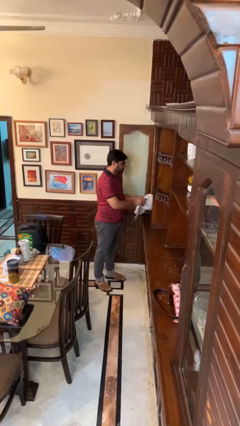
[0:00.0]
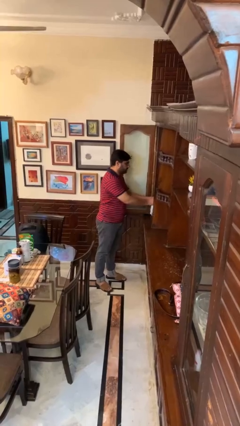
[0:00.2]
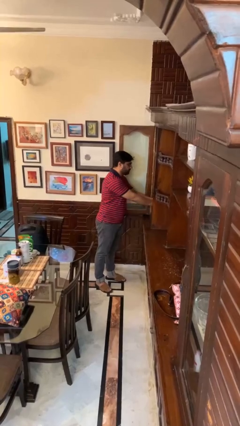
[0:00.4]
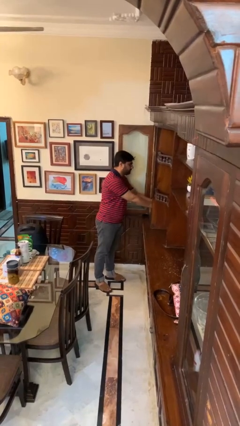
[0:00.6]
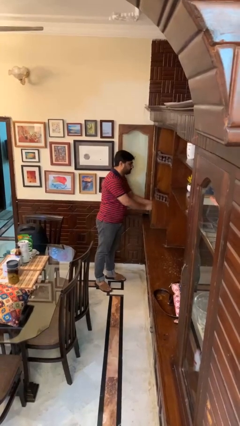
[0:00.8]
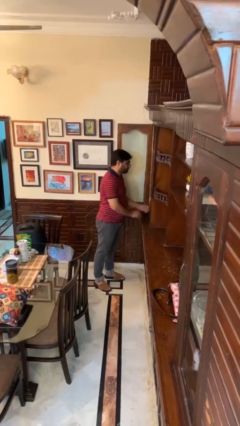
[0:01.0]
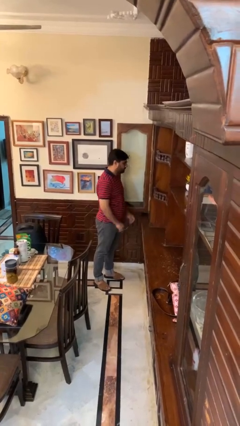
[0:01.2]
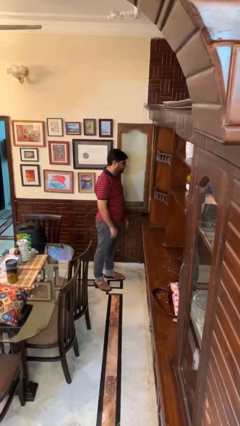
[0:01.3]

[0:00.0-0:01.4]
person puts clothes into dresser

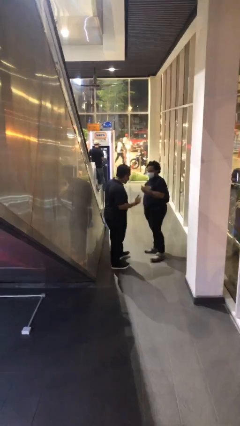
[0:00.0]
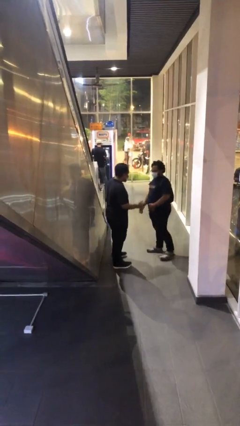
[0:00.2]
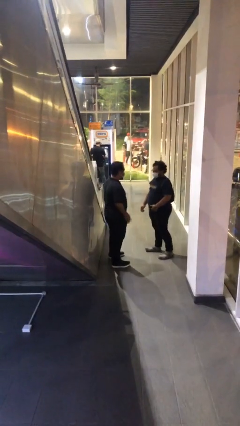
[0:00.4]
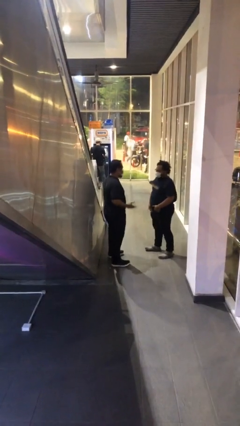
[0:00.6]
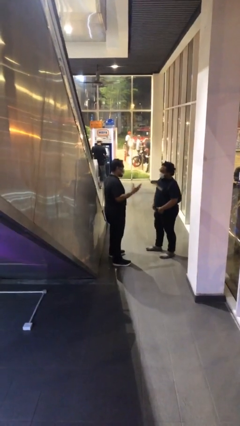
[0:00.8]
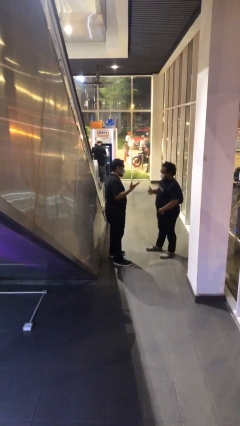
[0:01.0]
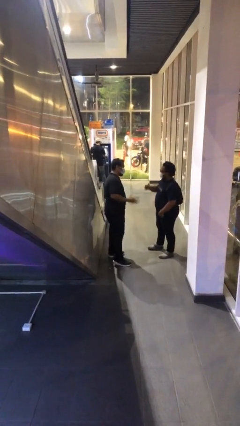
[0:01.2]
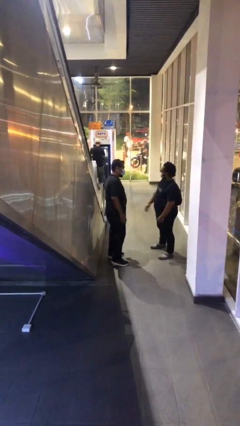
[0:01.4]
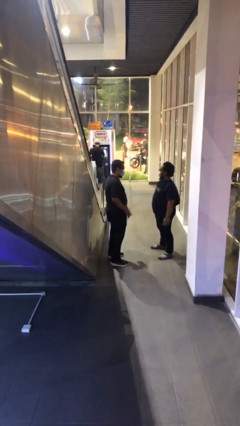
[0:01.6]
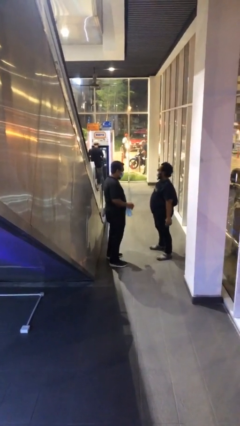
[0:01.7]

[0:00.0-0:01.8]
person talks to person

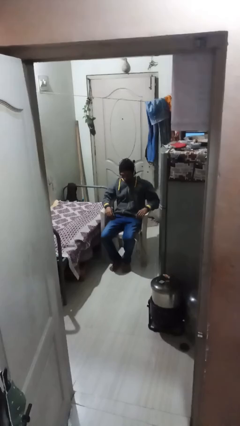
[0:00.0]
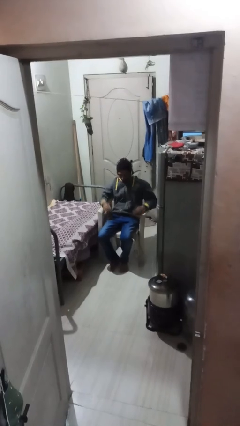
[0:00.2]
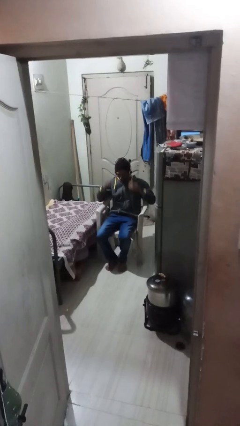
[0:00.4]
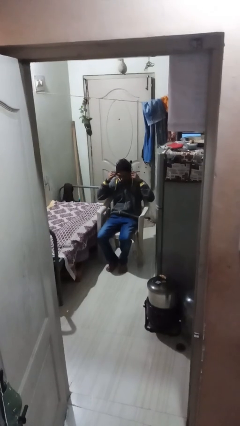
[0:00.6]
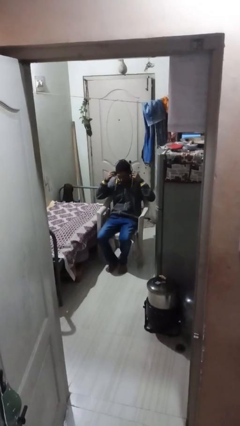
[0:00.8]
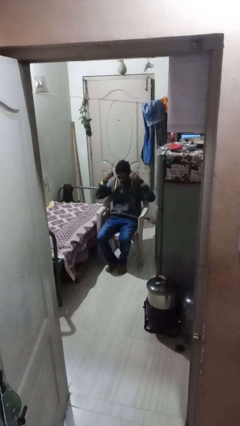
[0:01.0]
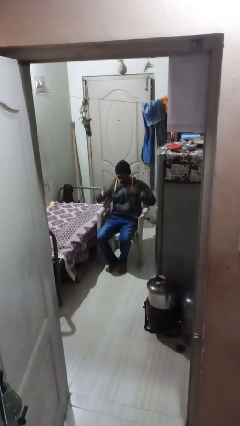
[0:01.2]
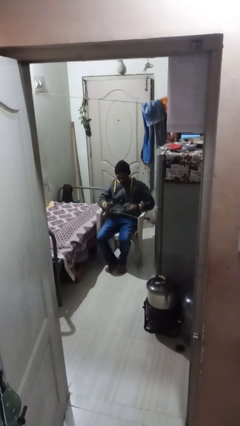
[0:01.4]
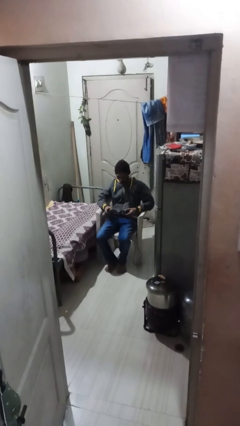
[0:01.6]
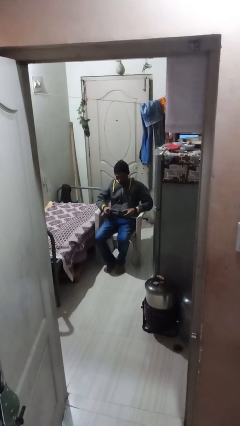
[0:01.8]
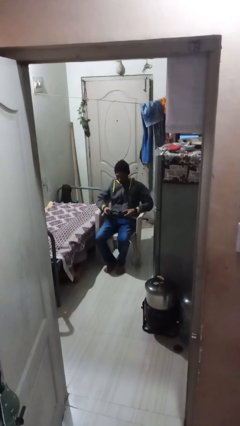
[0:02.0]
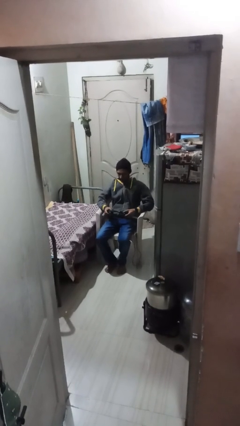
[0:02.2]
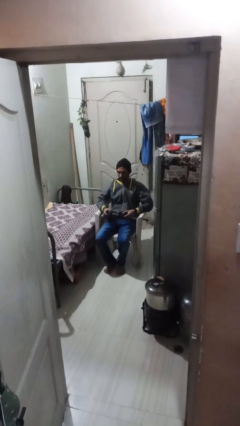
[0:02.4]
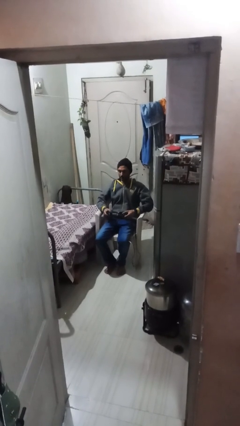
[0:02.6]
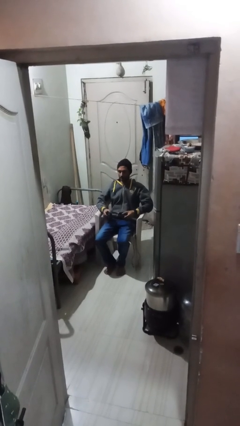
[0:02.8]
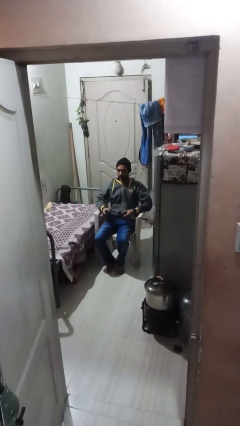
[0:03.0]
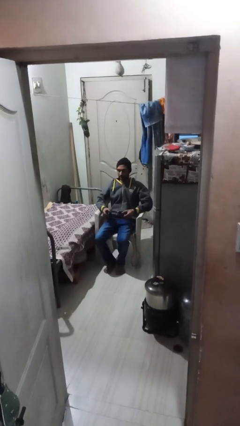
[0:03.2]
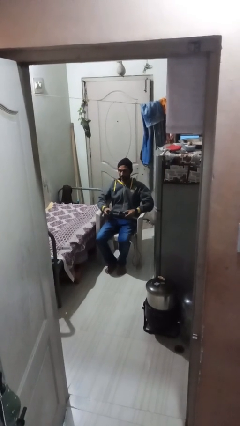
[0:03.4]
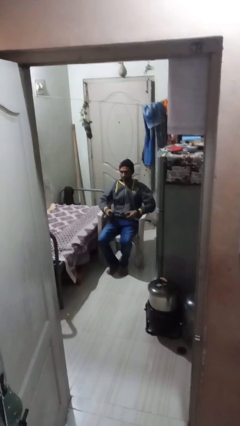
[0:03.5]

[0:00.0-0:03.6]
person takes off headphones

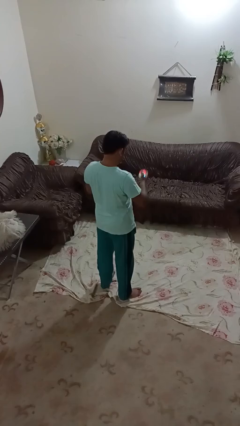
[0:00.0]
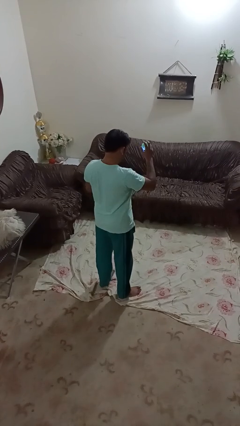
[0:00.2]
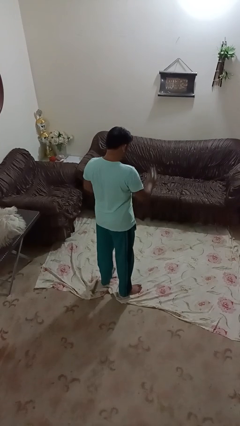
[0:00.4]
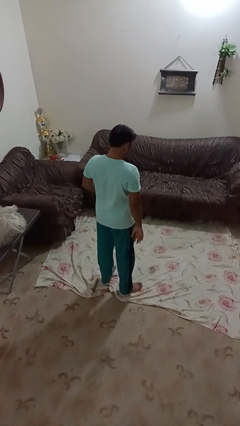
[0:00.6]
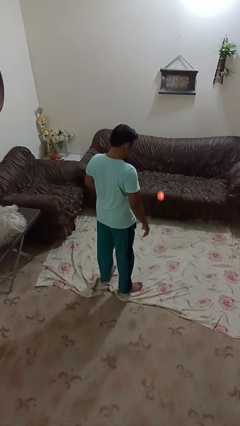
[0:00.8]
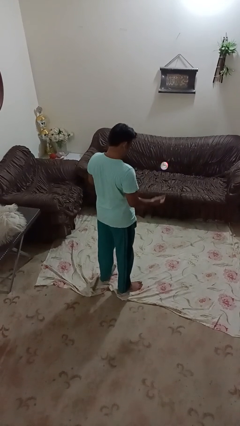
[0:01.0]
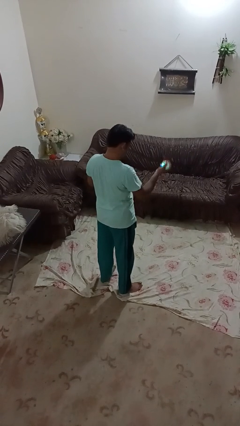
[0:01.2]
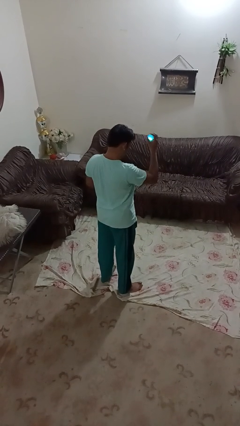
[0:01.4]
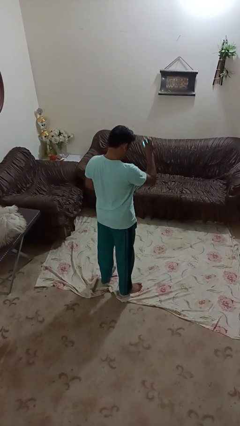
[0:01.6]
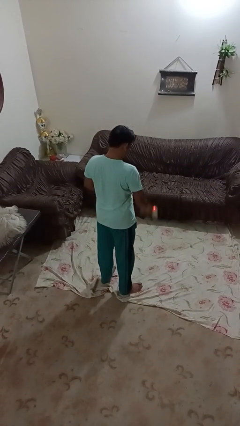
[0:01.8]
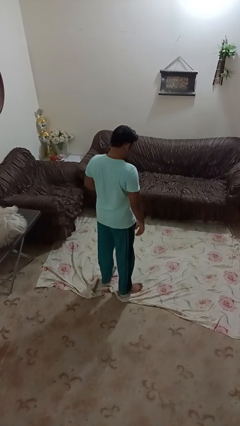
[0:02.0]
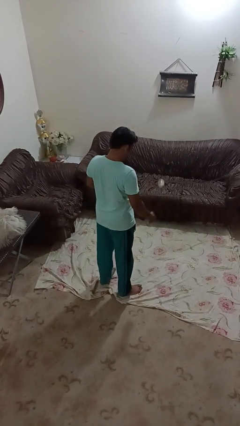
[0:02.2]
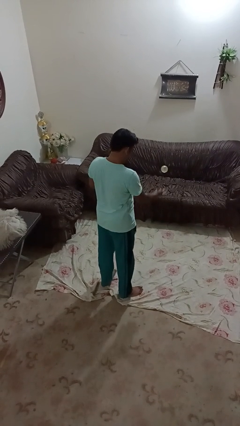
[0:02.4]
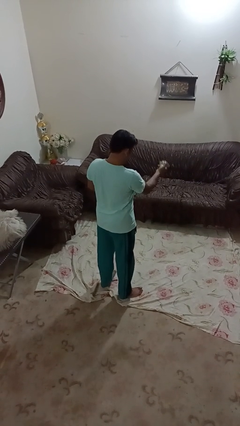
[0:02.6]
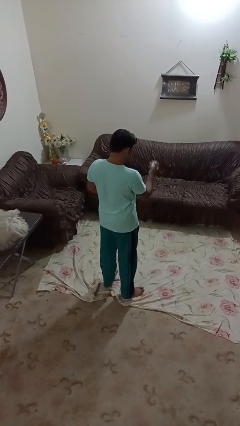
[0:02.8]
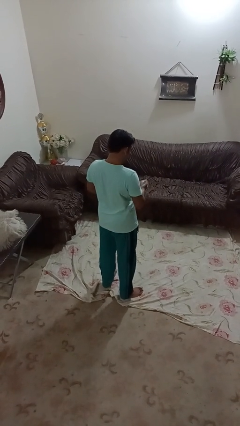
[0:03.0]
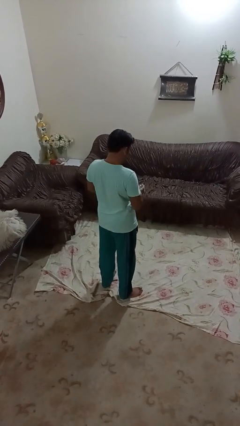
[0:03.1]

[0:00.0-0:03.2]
person bounces ball on floor

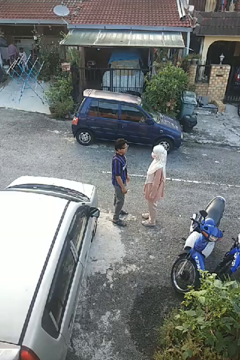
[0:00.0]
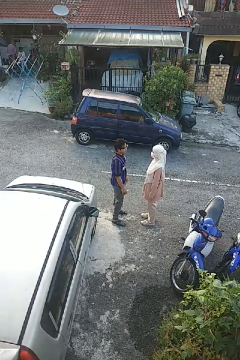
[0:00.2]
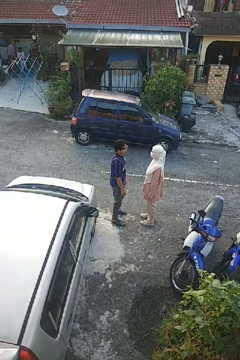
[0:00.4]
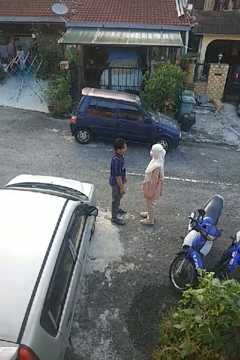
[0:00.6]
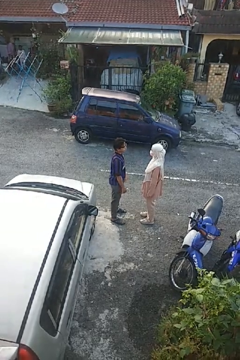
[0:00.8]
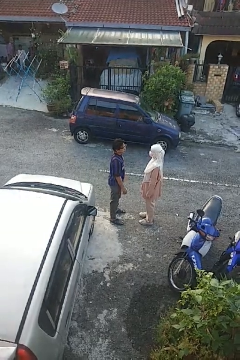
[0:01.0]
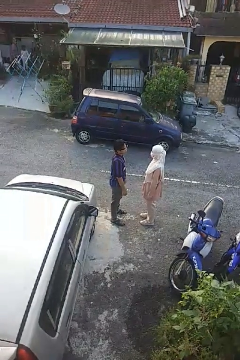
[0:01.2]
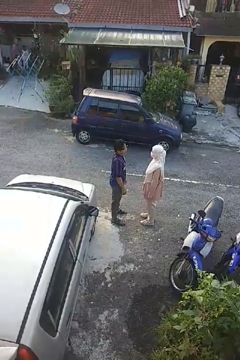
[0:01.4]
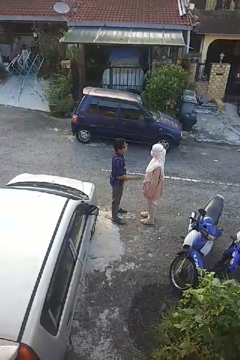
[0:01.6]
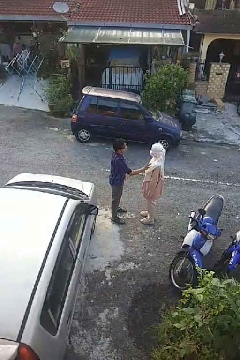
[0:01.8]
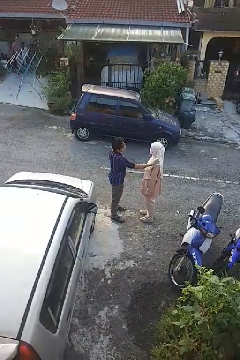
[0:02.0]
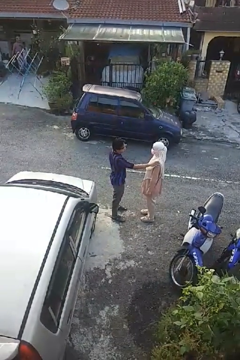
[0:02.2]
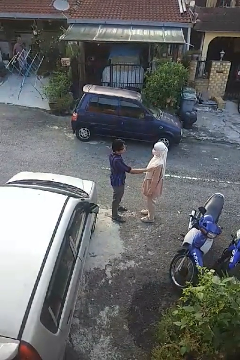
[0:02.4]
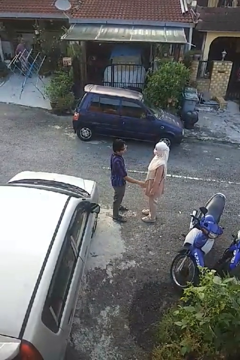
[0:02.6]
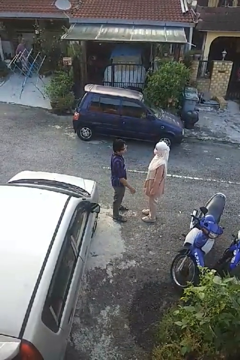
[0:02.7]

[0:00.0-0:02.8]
person shoves person

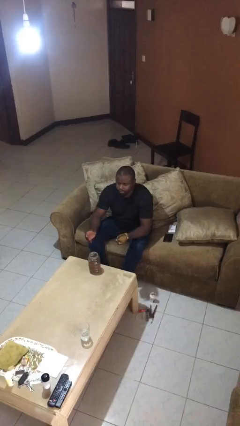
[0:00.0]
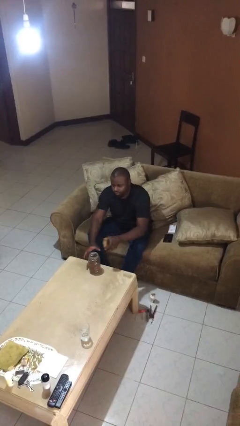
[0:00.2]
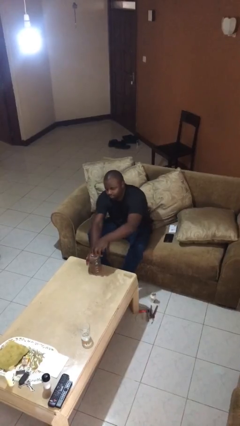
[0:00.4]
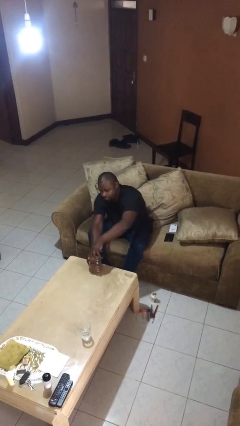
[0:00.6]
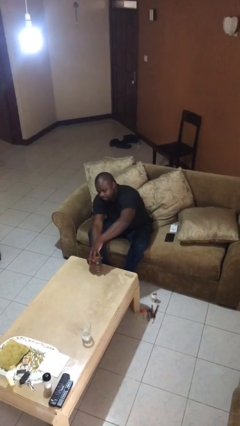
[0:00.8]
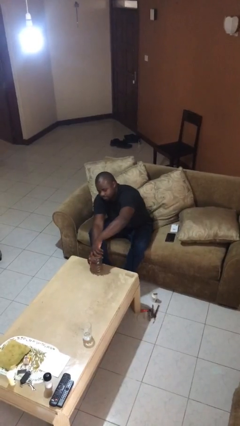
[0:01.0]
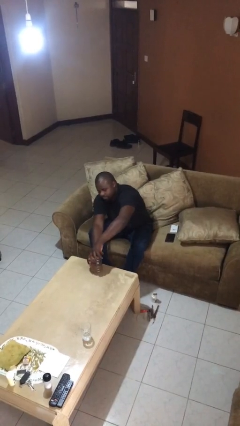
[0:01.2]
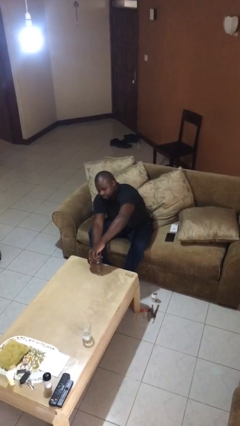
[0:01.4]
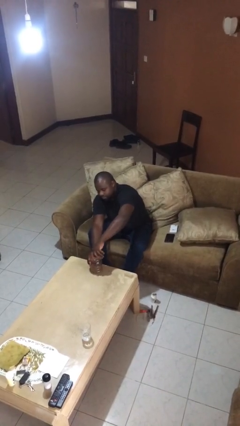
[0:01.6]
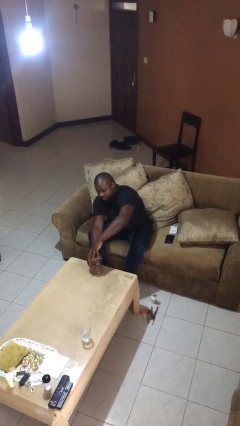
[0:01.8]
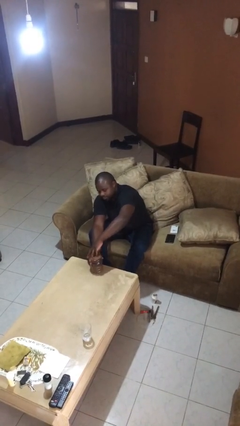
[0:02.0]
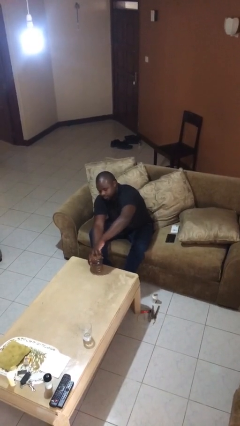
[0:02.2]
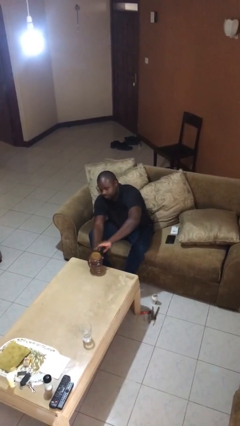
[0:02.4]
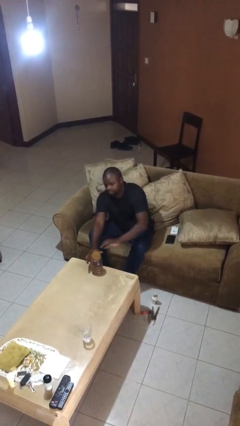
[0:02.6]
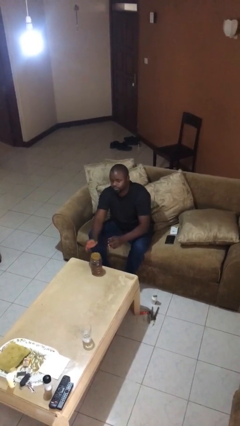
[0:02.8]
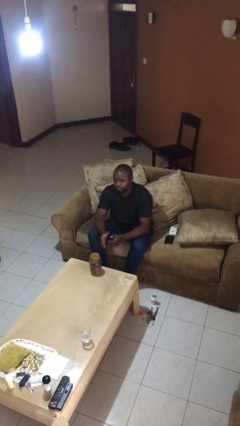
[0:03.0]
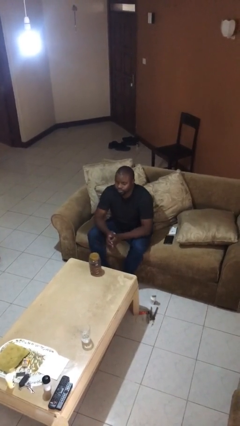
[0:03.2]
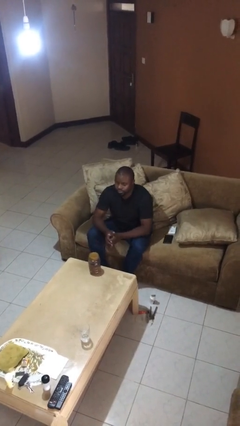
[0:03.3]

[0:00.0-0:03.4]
person closes jar

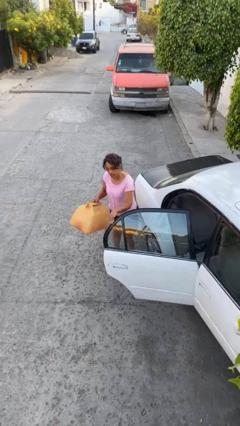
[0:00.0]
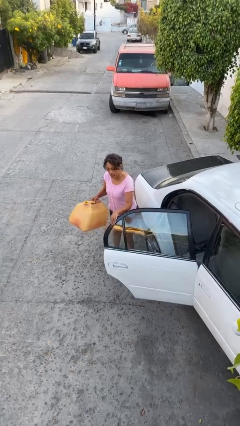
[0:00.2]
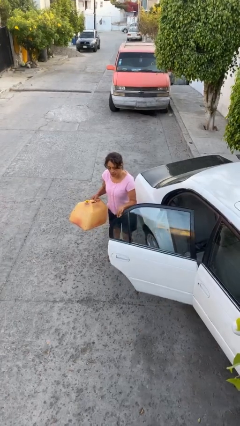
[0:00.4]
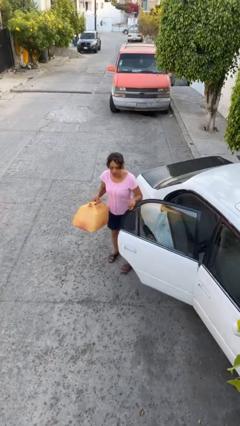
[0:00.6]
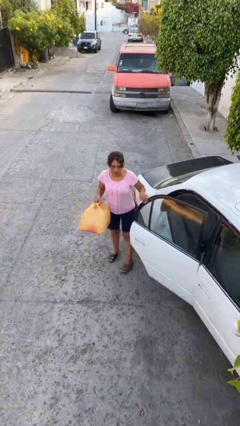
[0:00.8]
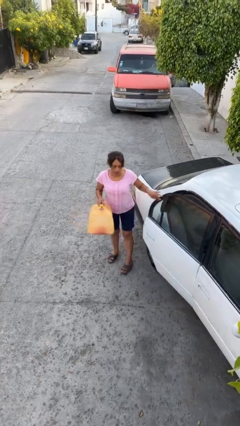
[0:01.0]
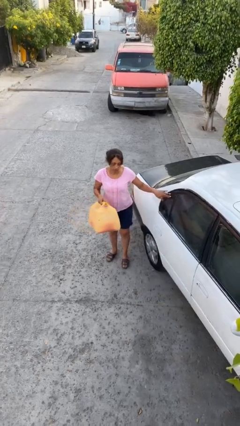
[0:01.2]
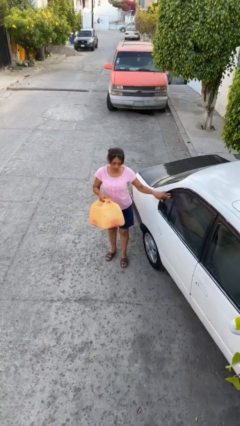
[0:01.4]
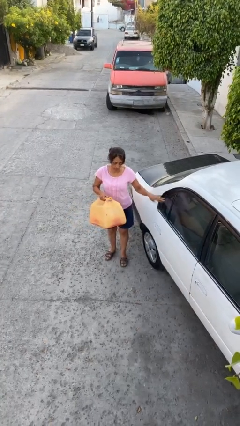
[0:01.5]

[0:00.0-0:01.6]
person closes car door
